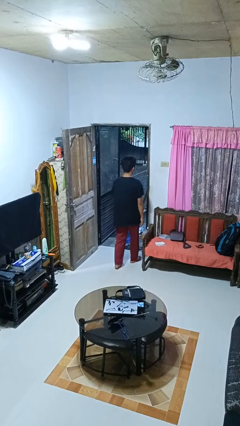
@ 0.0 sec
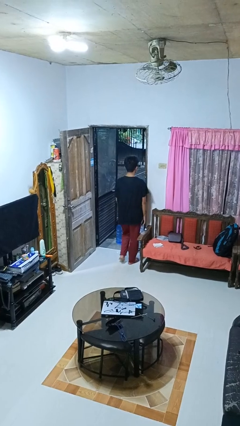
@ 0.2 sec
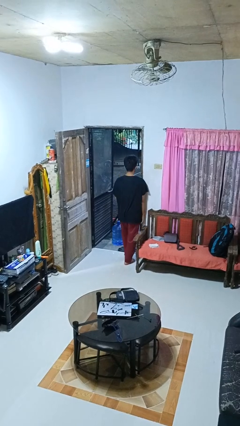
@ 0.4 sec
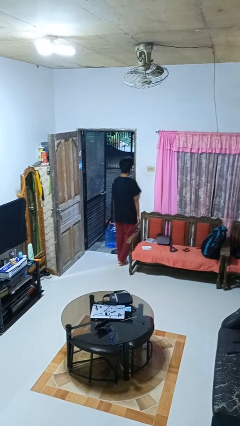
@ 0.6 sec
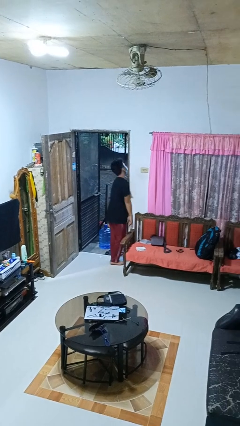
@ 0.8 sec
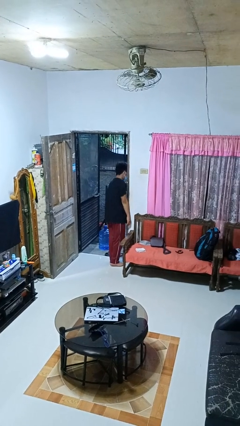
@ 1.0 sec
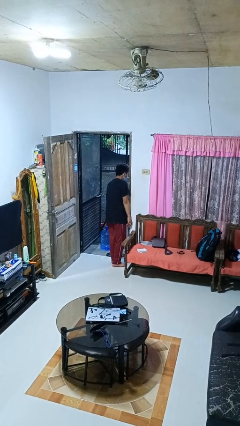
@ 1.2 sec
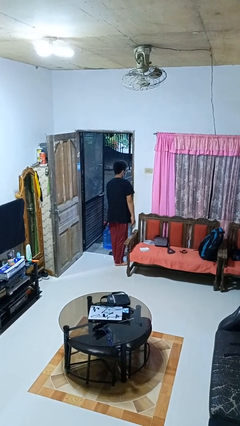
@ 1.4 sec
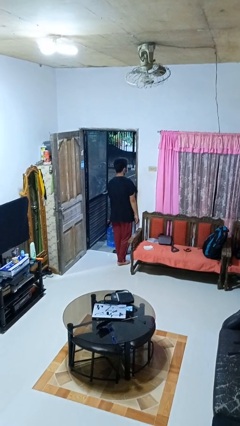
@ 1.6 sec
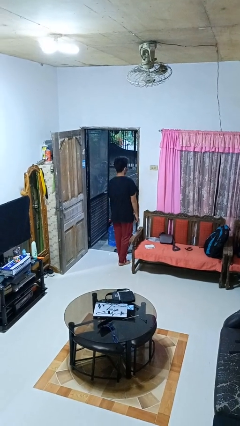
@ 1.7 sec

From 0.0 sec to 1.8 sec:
person bumps into wall

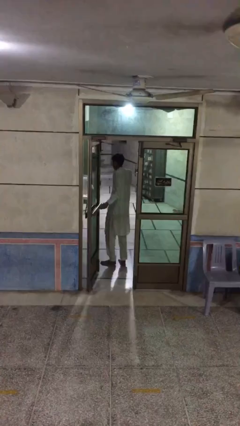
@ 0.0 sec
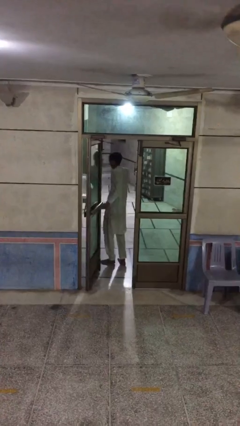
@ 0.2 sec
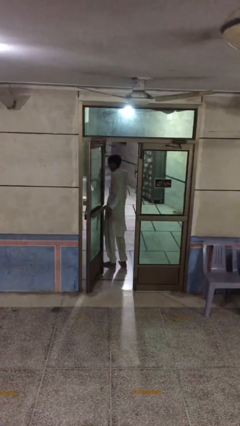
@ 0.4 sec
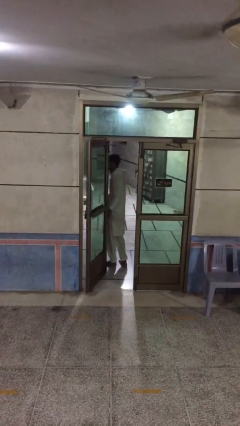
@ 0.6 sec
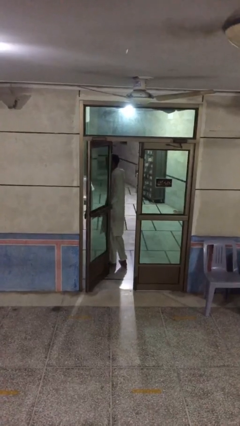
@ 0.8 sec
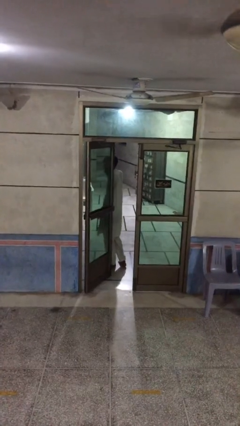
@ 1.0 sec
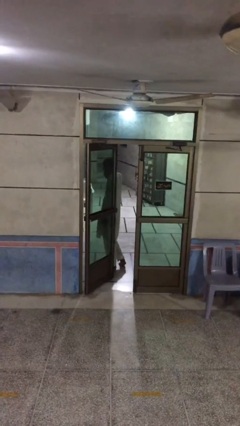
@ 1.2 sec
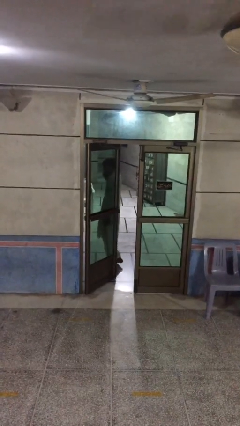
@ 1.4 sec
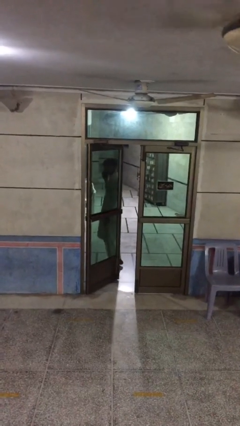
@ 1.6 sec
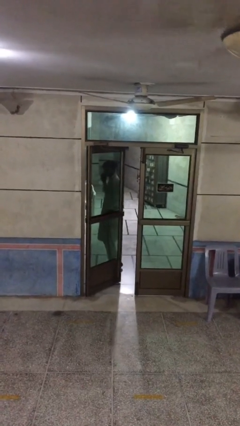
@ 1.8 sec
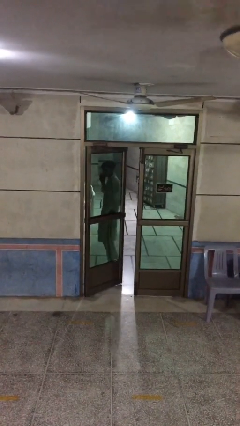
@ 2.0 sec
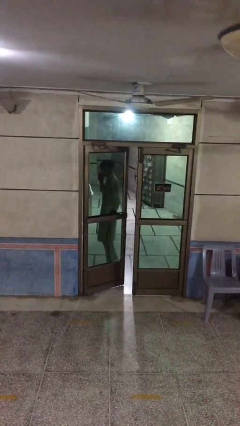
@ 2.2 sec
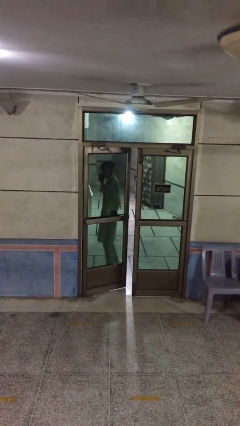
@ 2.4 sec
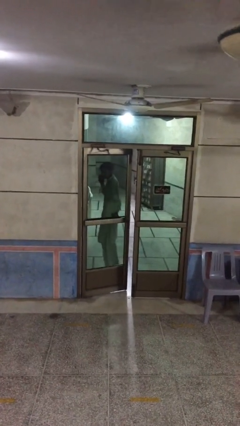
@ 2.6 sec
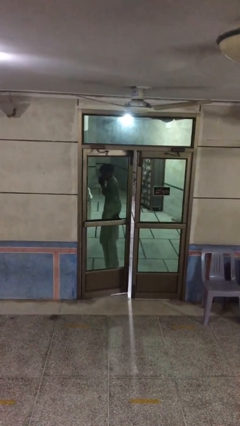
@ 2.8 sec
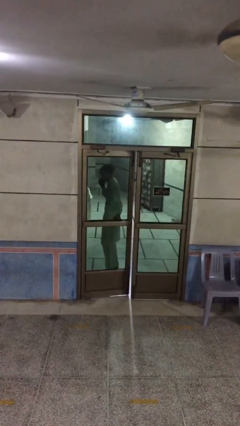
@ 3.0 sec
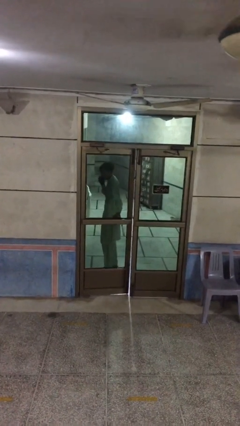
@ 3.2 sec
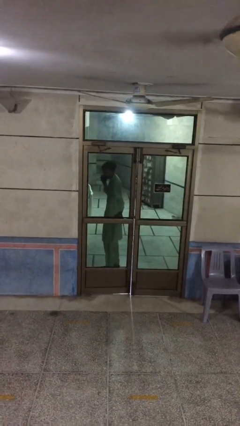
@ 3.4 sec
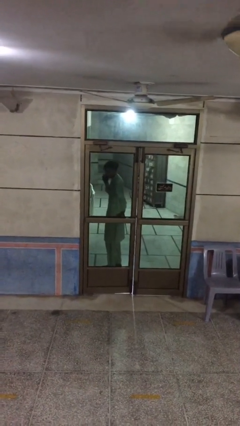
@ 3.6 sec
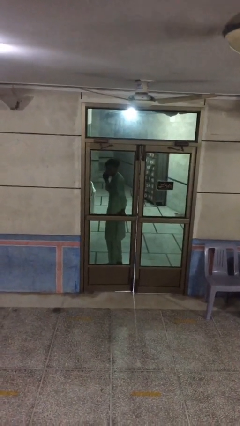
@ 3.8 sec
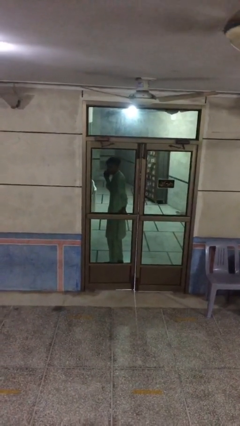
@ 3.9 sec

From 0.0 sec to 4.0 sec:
person closes facility door

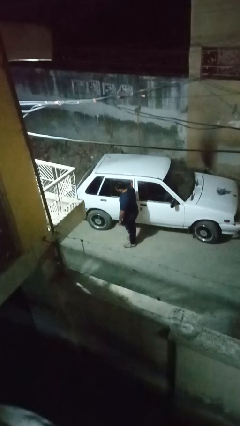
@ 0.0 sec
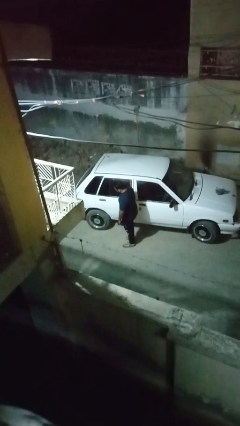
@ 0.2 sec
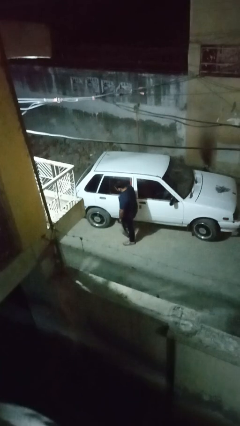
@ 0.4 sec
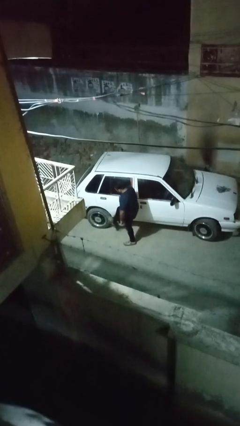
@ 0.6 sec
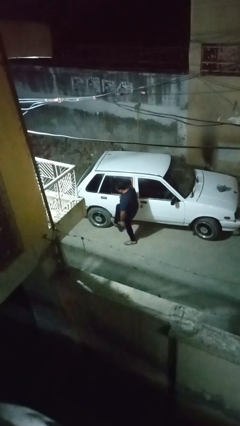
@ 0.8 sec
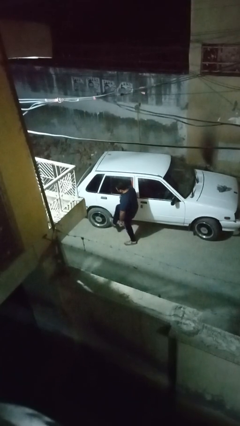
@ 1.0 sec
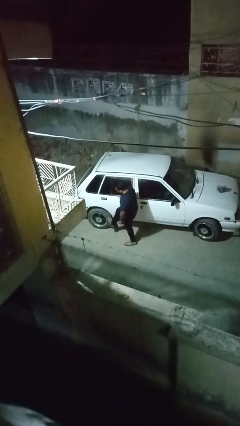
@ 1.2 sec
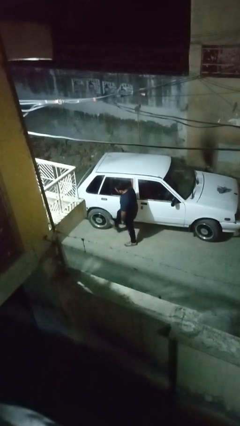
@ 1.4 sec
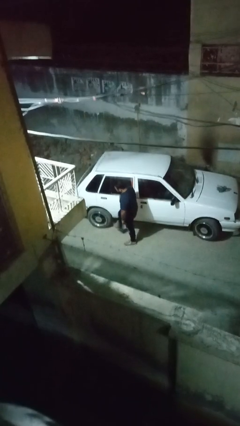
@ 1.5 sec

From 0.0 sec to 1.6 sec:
person kicks car tires

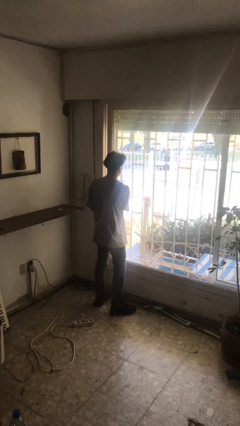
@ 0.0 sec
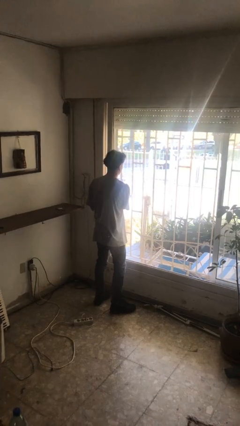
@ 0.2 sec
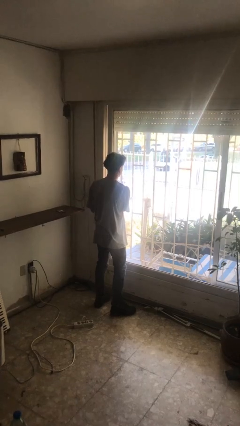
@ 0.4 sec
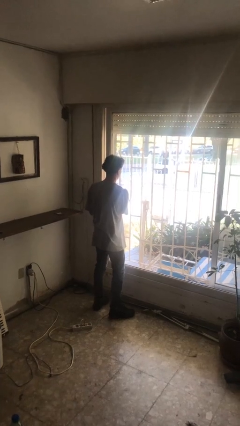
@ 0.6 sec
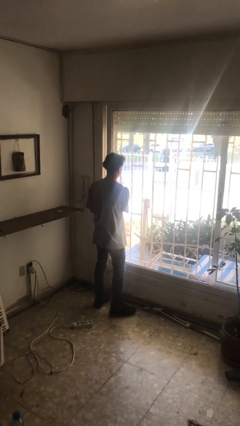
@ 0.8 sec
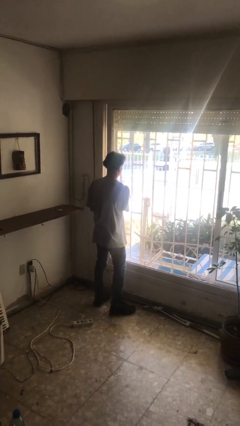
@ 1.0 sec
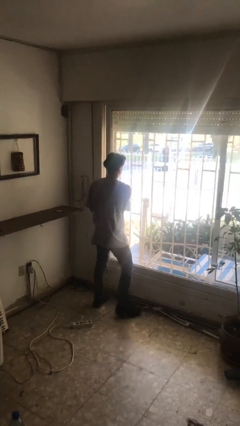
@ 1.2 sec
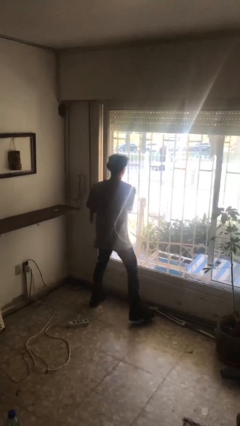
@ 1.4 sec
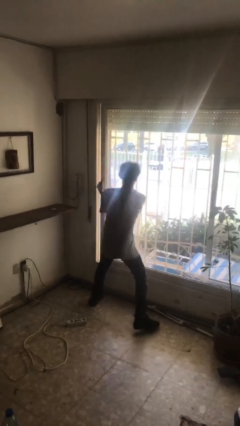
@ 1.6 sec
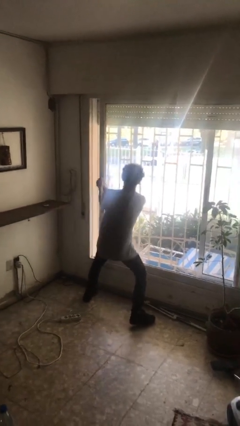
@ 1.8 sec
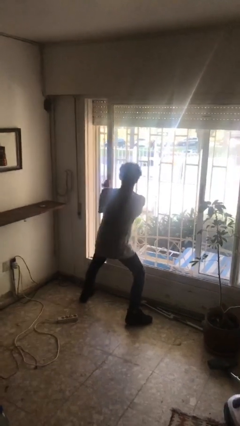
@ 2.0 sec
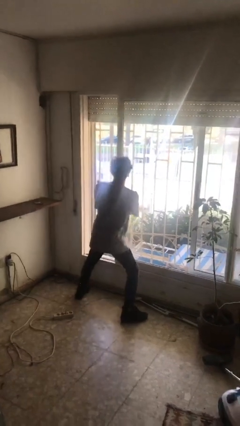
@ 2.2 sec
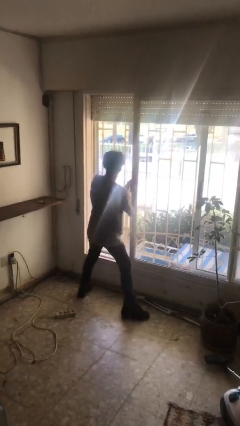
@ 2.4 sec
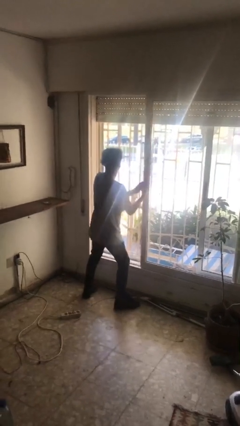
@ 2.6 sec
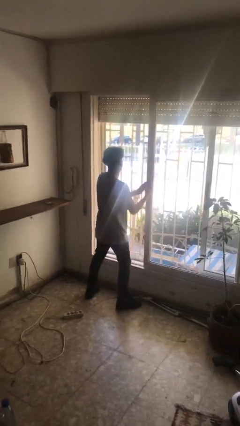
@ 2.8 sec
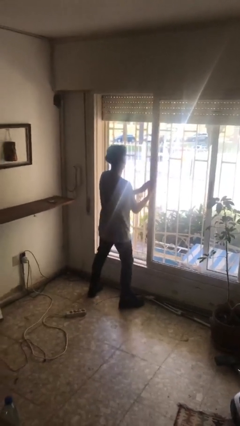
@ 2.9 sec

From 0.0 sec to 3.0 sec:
person opens sliding door

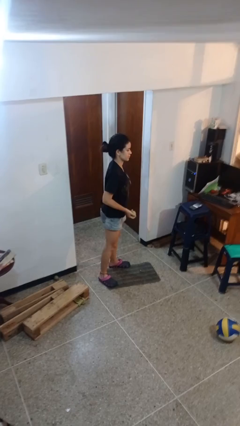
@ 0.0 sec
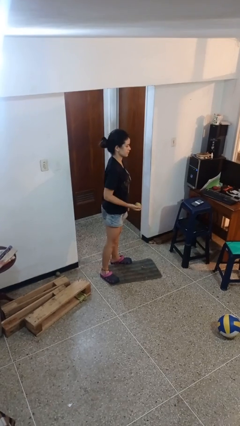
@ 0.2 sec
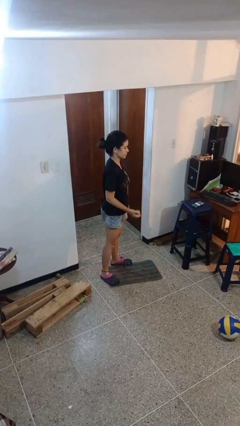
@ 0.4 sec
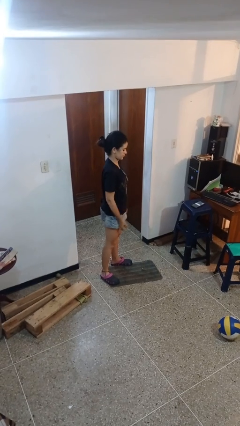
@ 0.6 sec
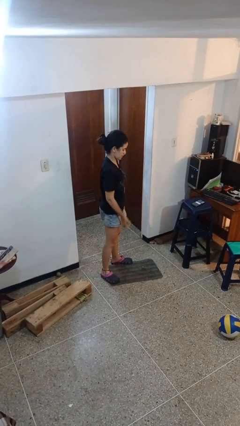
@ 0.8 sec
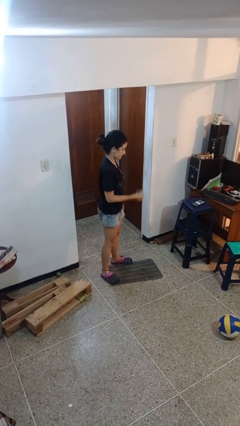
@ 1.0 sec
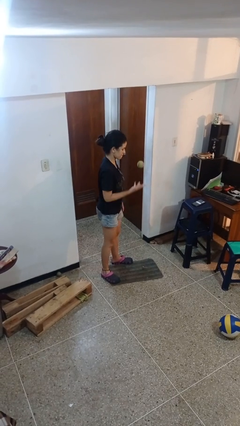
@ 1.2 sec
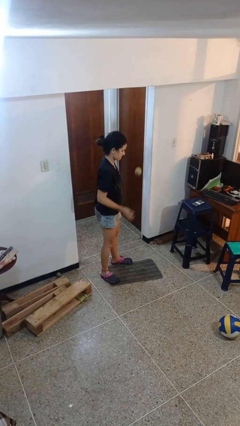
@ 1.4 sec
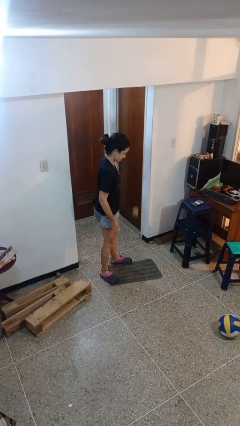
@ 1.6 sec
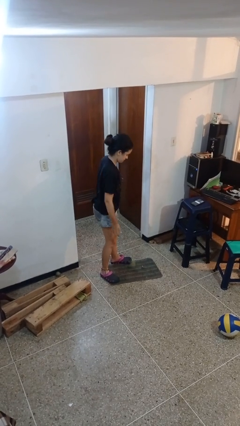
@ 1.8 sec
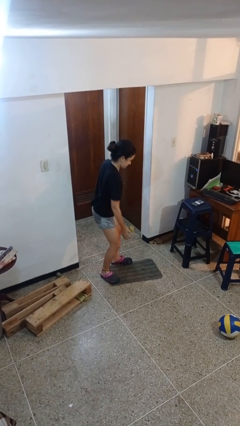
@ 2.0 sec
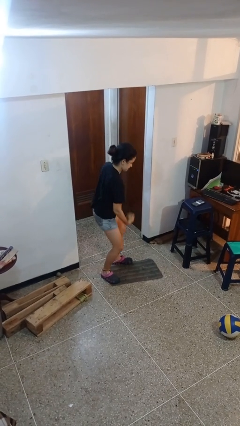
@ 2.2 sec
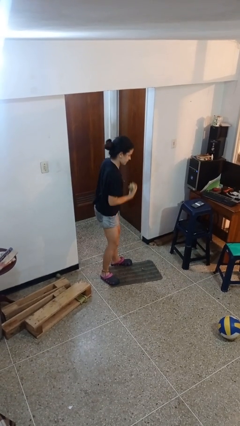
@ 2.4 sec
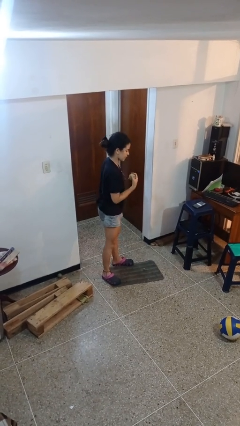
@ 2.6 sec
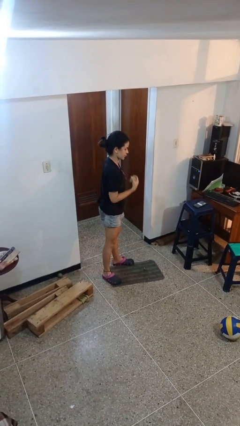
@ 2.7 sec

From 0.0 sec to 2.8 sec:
person bounces ball on floor

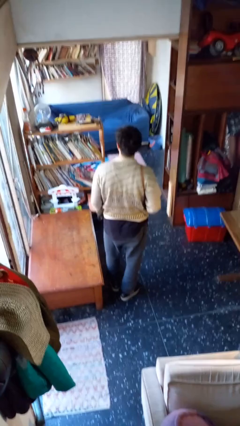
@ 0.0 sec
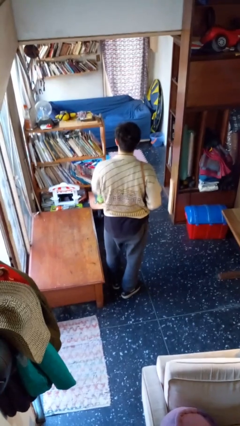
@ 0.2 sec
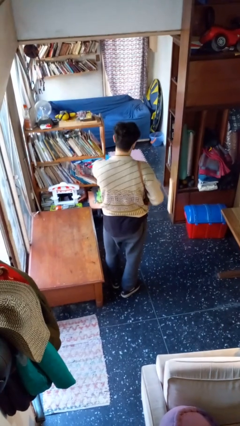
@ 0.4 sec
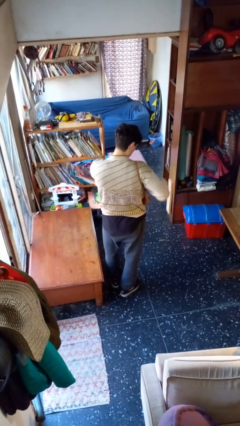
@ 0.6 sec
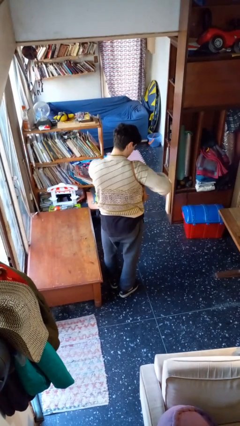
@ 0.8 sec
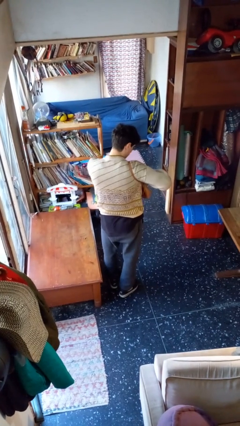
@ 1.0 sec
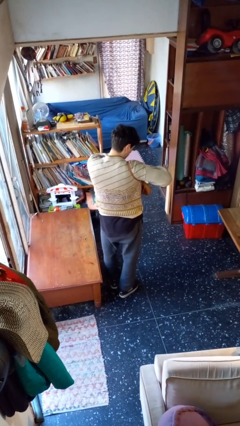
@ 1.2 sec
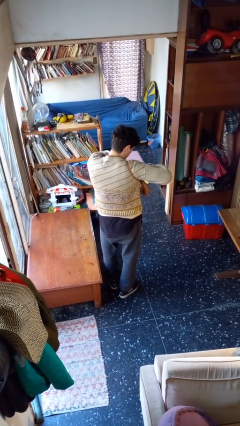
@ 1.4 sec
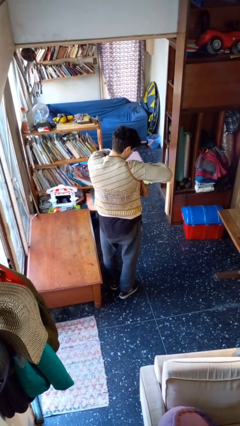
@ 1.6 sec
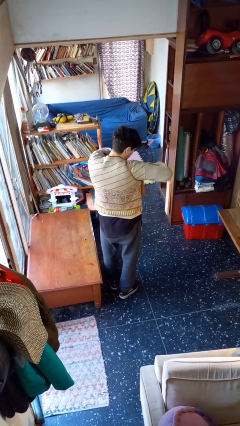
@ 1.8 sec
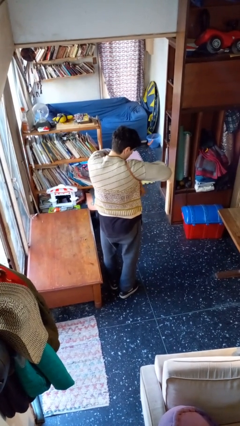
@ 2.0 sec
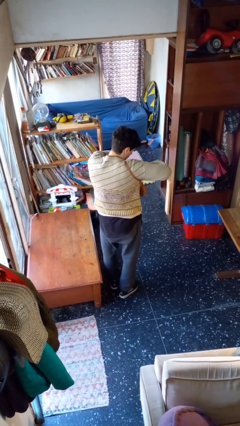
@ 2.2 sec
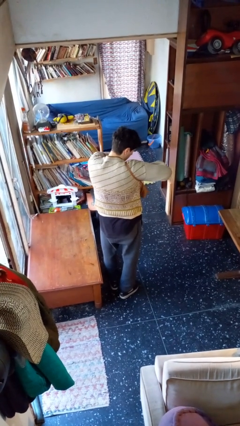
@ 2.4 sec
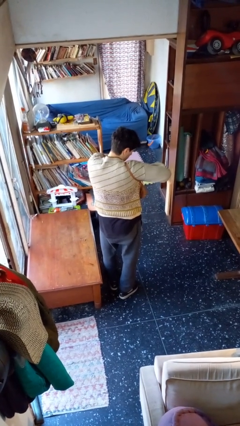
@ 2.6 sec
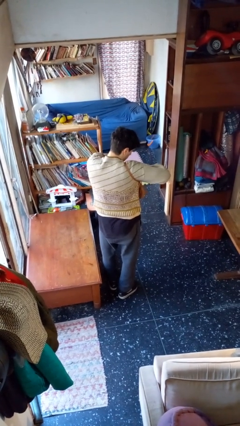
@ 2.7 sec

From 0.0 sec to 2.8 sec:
person searches in purse

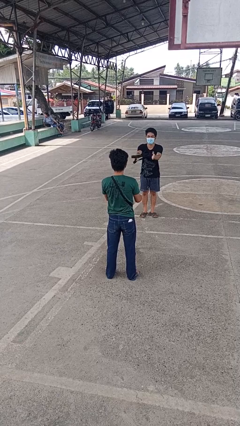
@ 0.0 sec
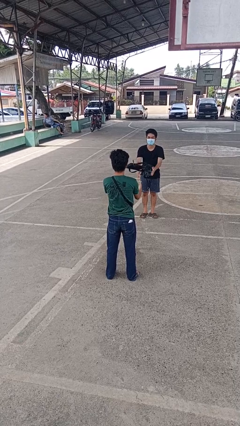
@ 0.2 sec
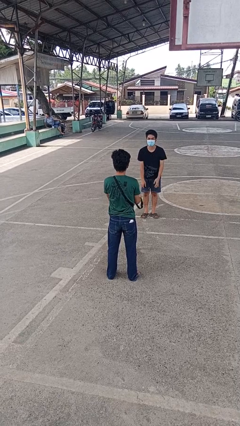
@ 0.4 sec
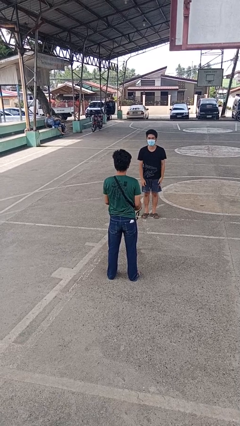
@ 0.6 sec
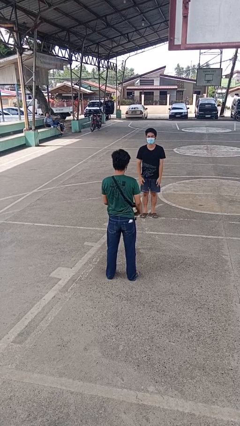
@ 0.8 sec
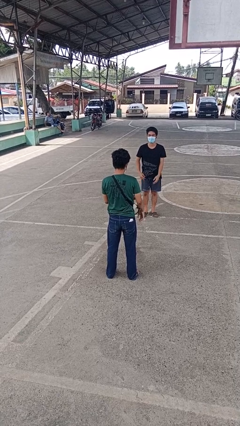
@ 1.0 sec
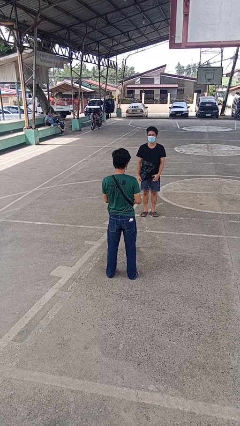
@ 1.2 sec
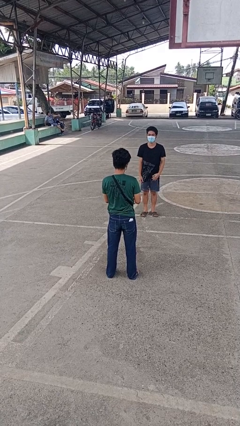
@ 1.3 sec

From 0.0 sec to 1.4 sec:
person catches object from person
